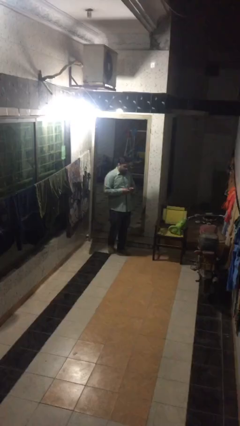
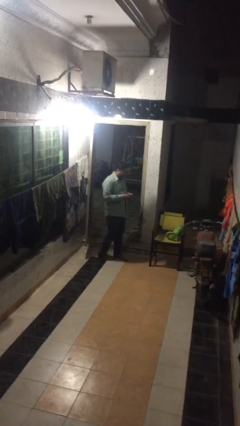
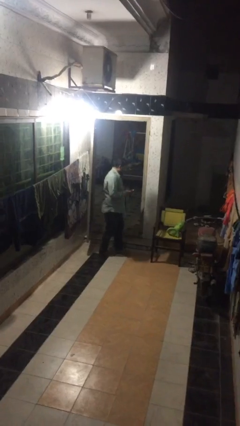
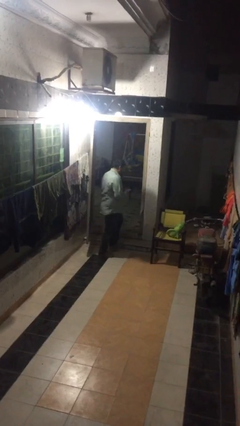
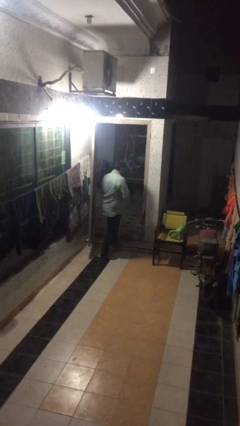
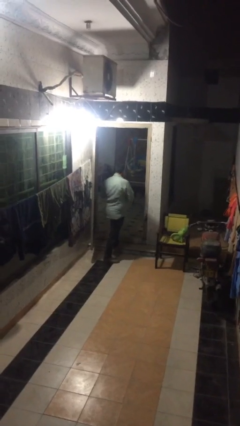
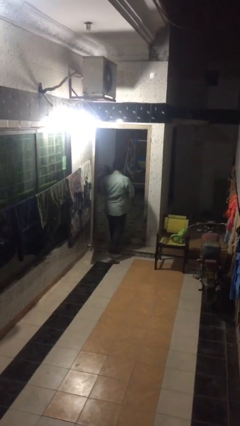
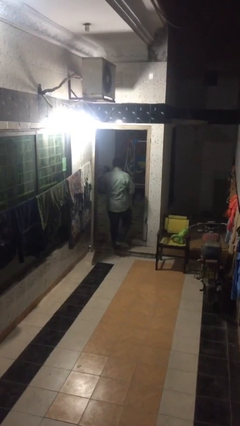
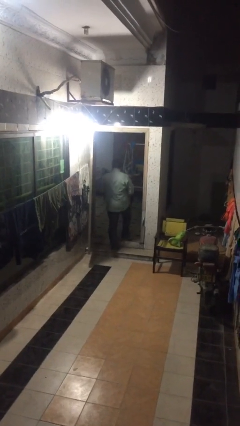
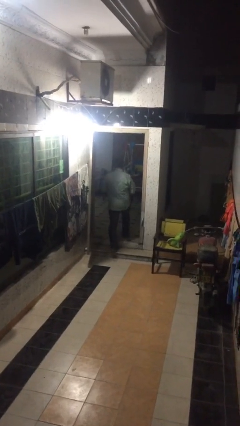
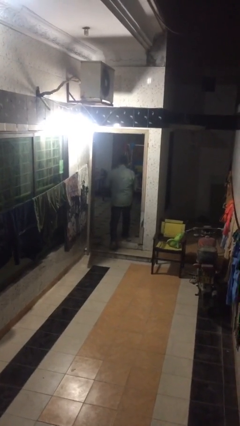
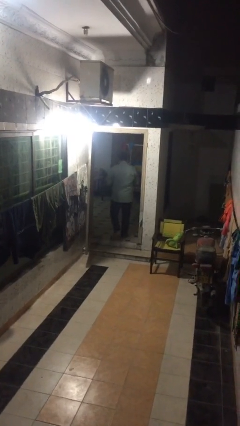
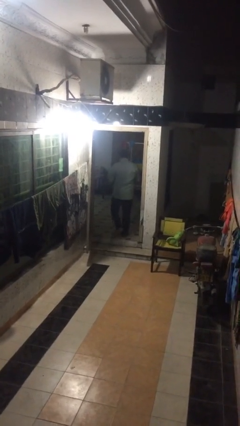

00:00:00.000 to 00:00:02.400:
person exits scene through structure

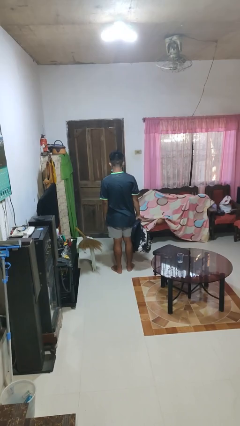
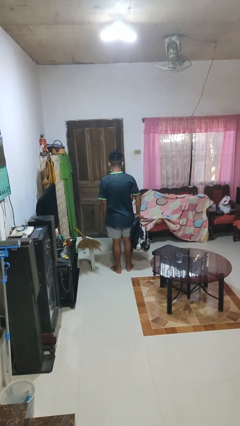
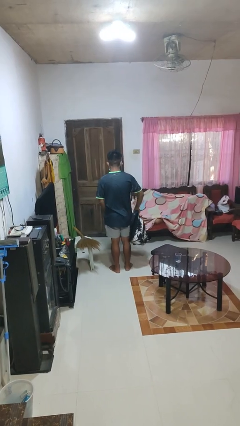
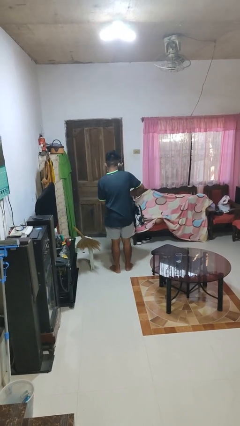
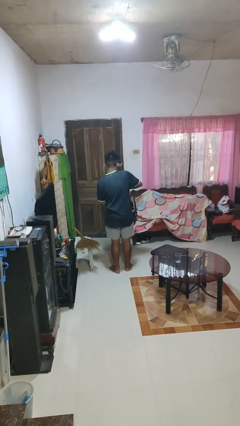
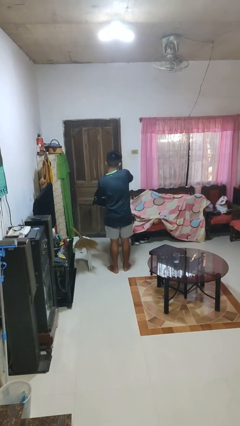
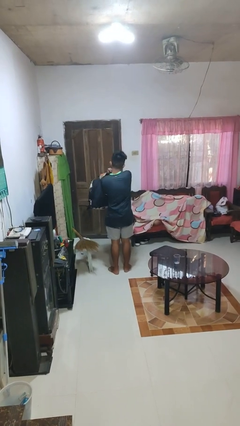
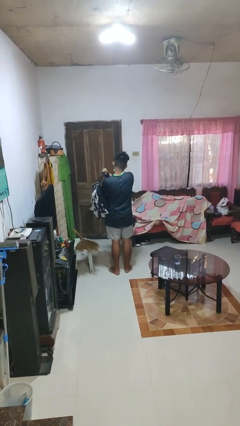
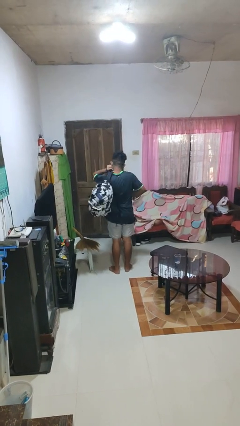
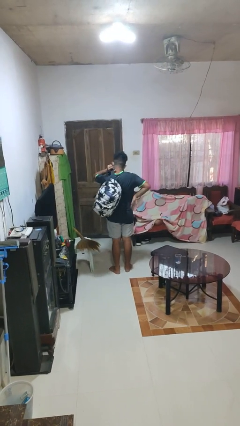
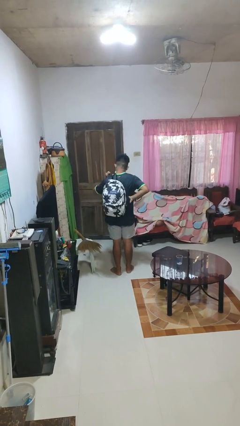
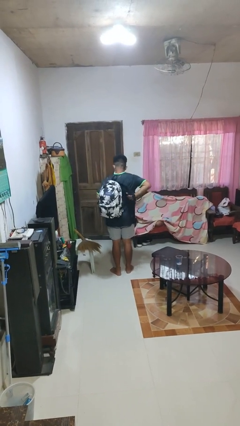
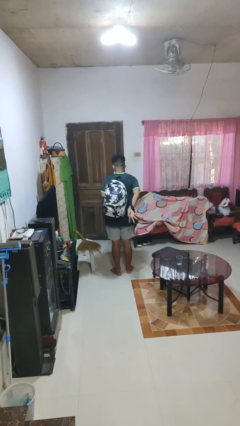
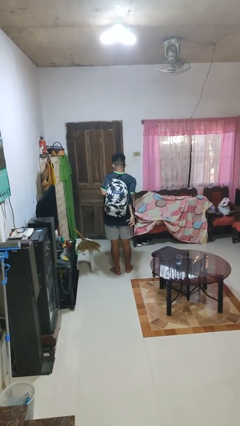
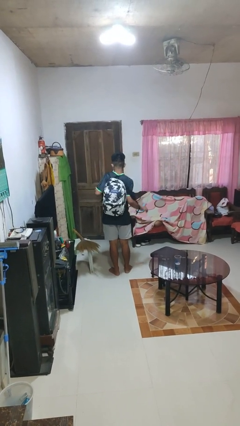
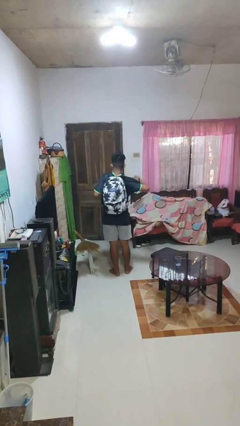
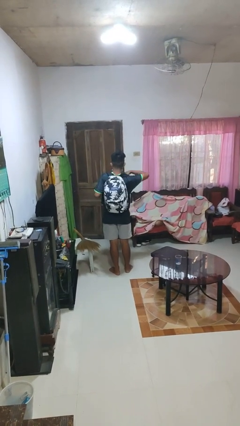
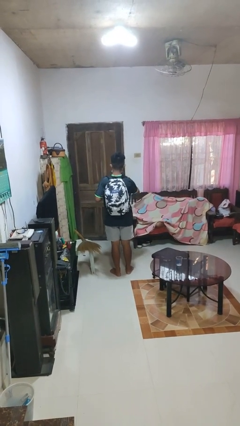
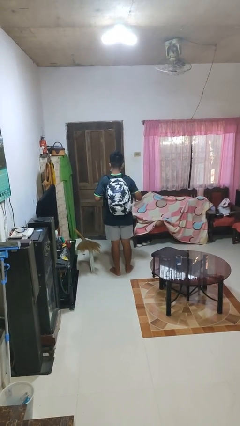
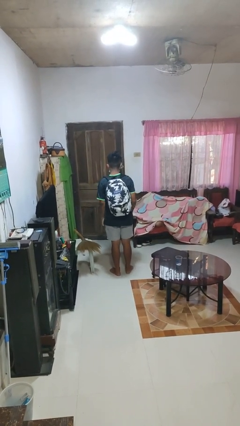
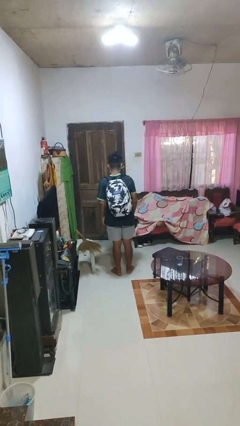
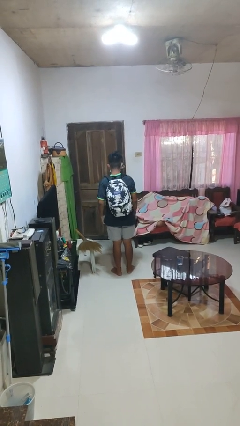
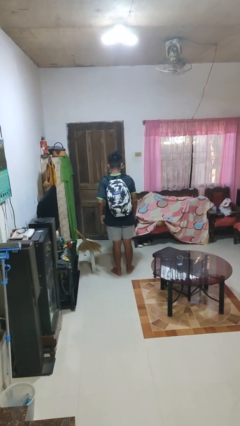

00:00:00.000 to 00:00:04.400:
person puts on backpack

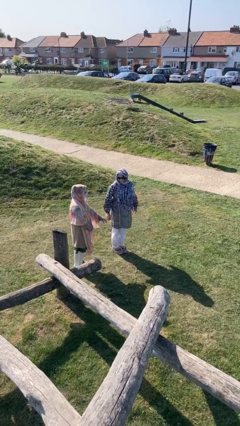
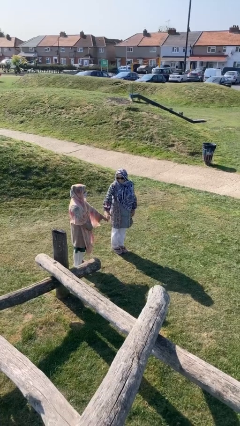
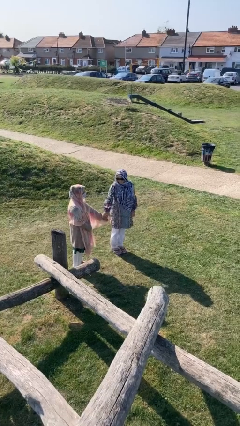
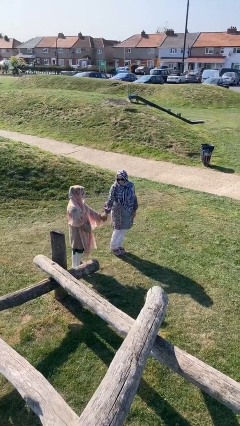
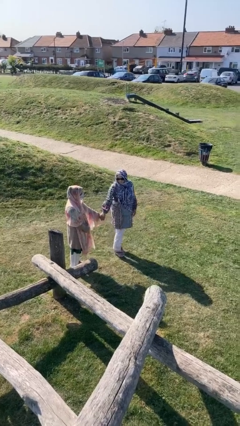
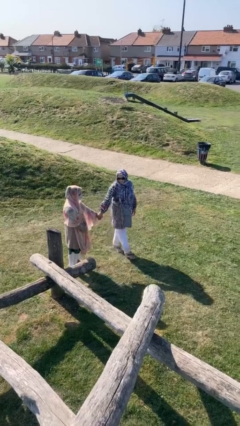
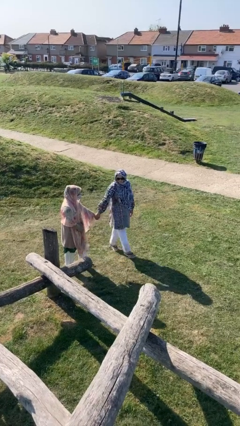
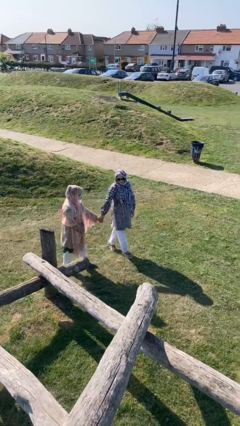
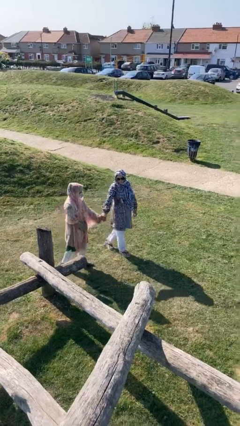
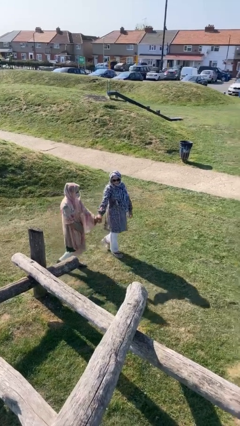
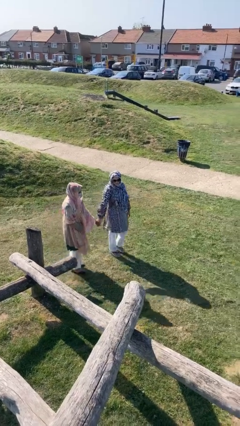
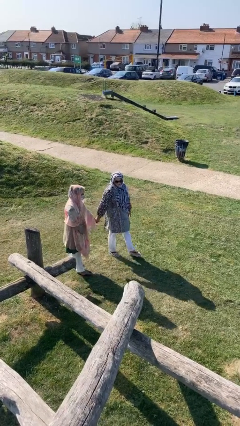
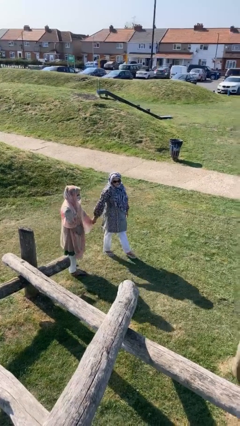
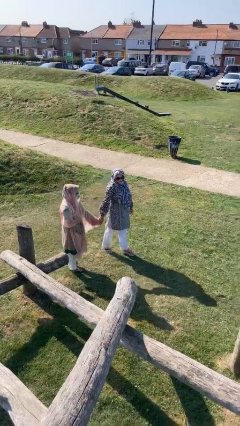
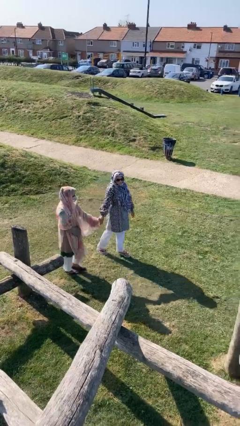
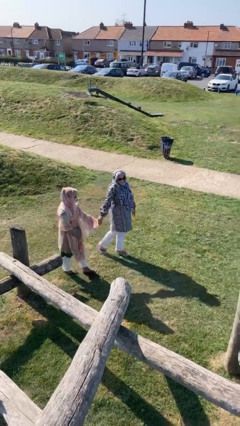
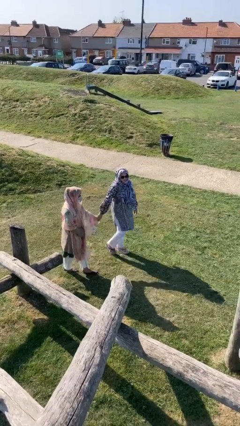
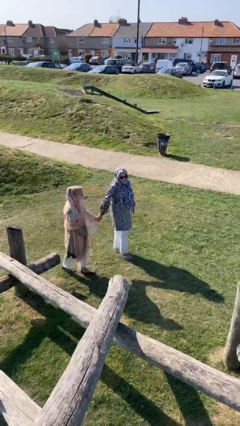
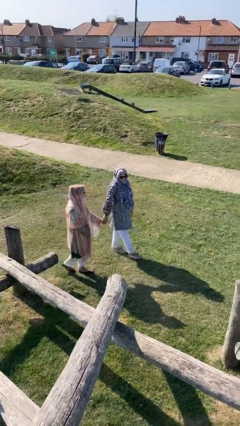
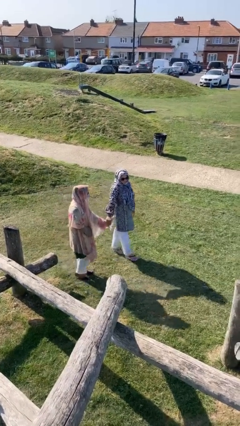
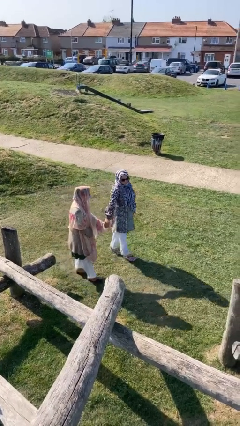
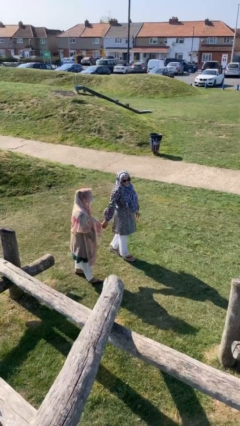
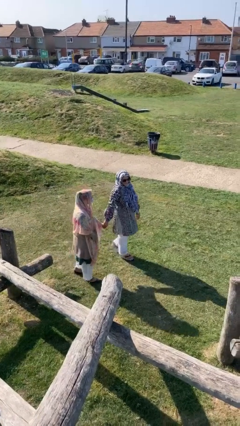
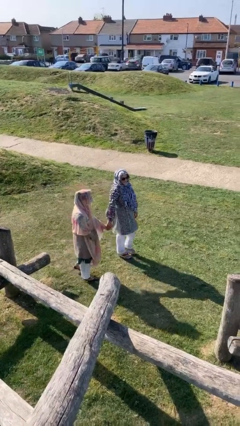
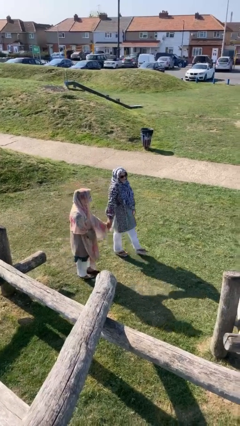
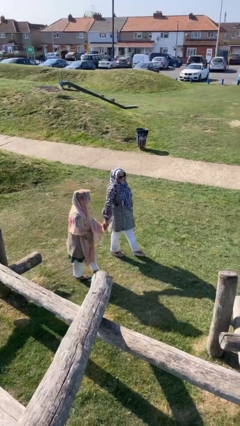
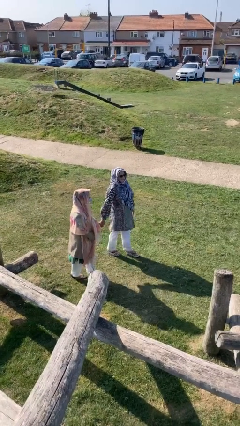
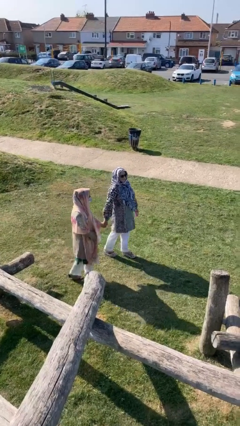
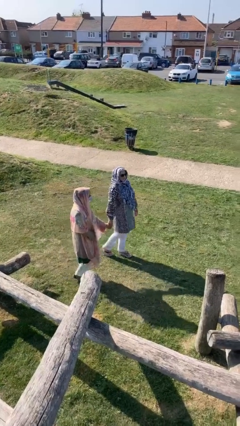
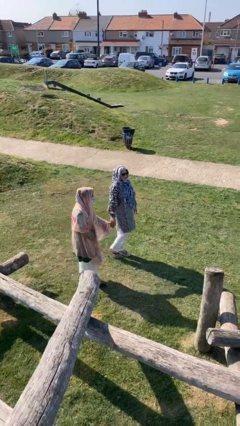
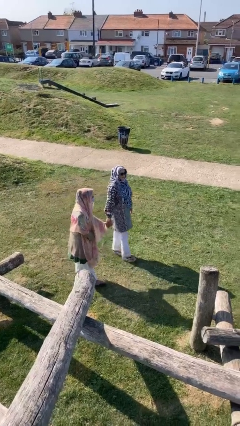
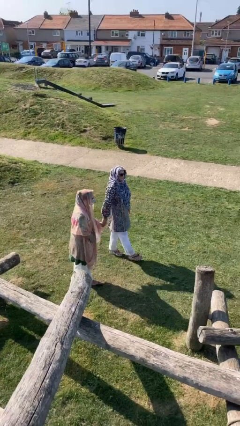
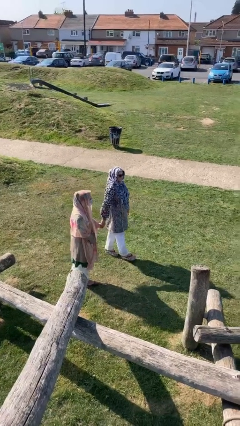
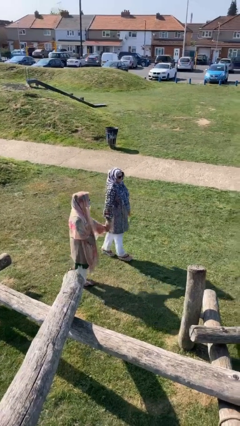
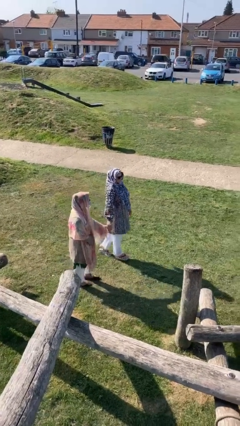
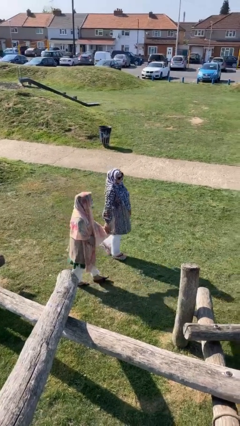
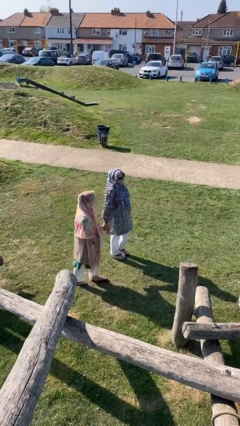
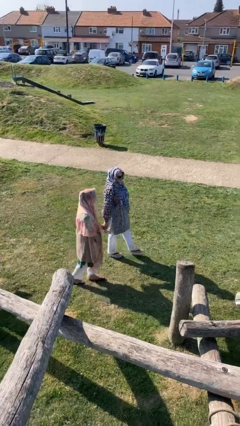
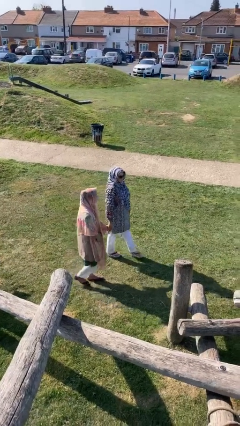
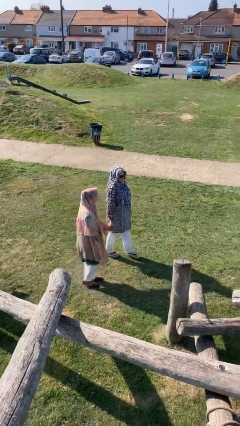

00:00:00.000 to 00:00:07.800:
person holds hand

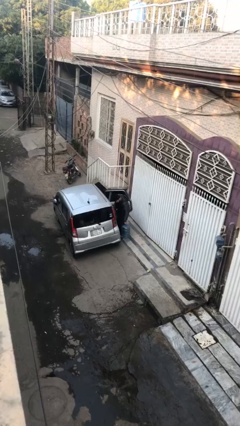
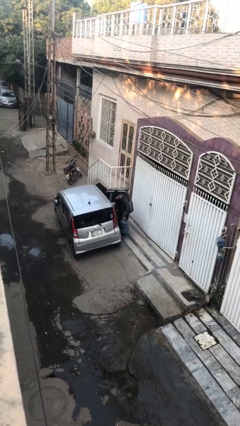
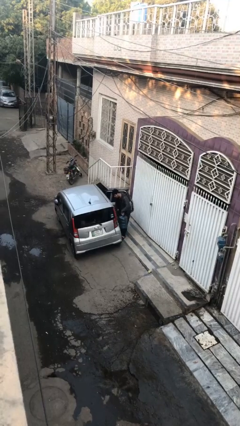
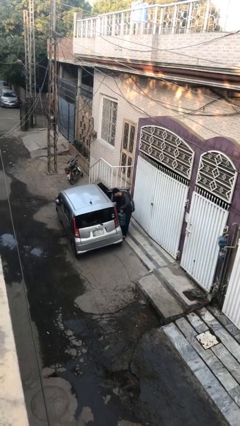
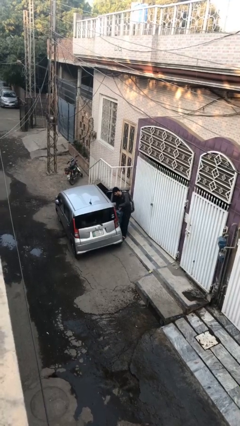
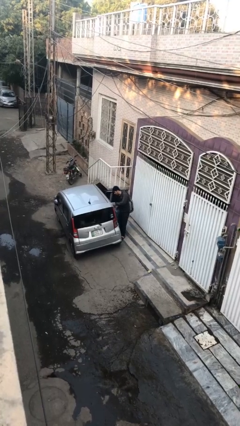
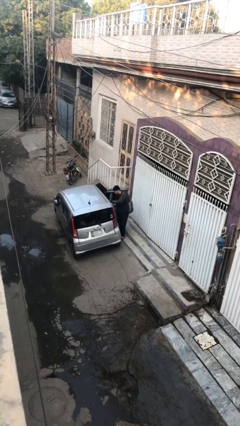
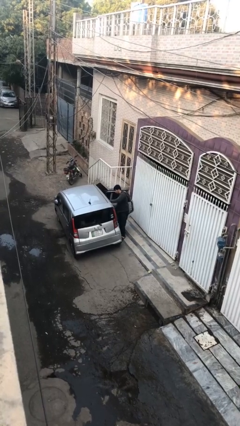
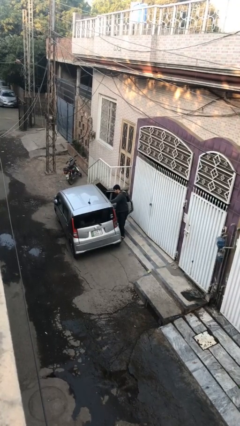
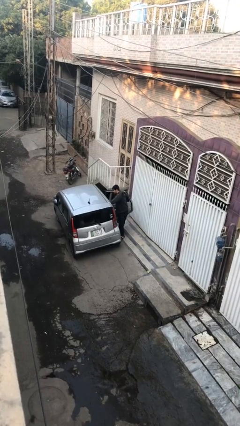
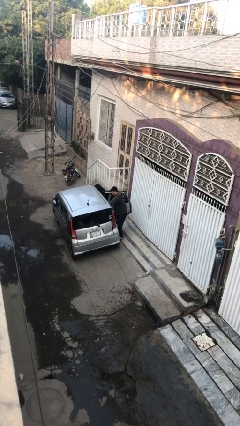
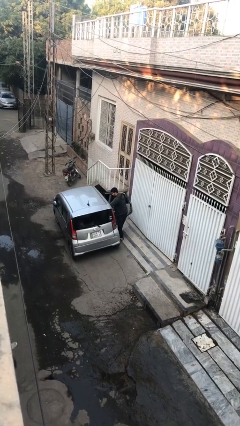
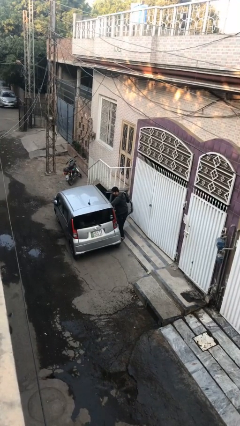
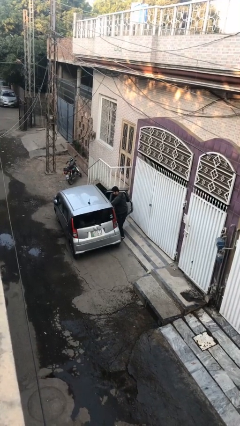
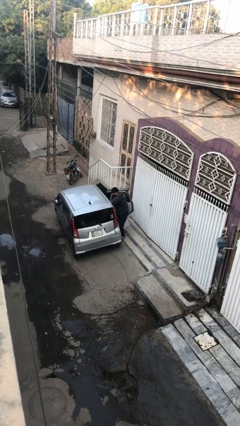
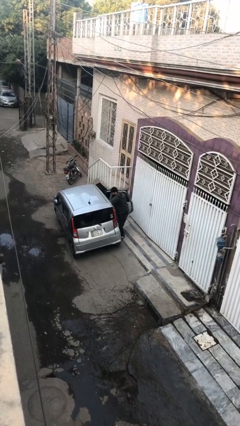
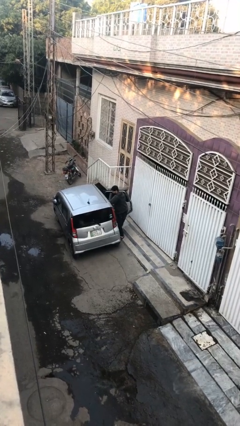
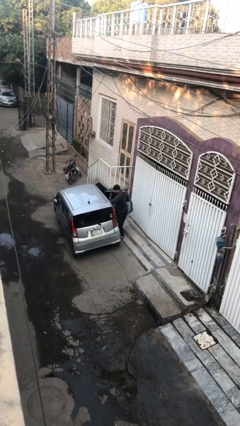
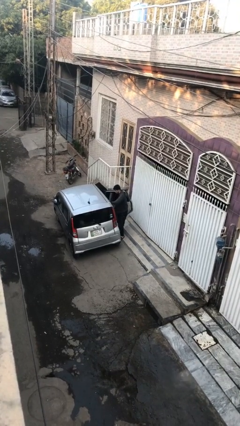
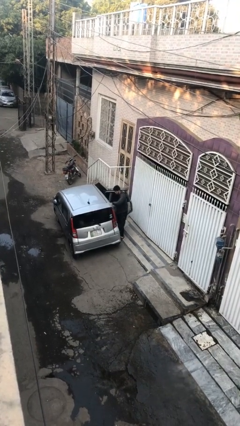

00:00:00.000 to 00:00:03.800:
person loads car
